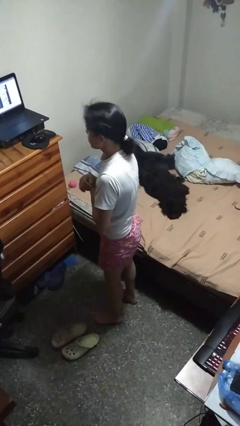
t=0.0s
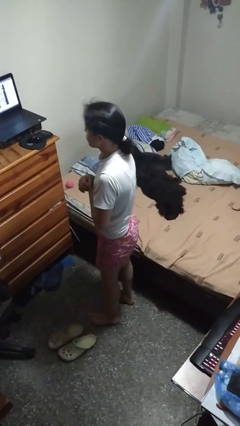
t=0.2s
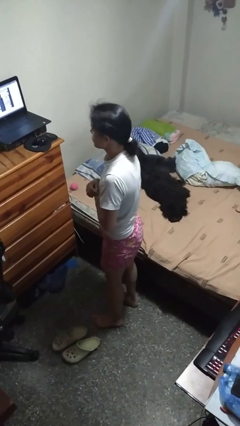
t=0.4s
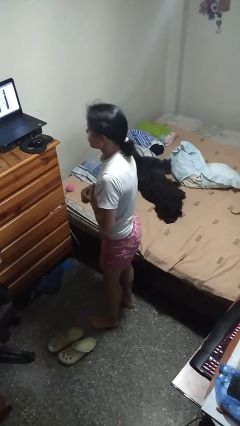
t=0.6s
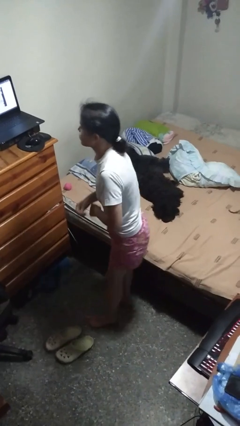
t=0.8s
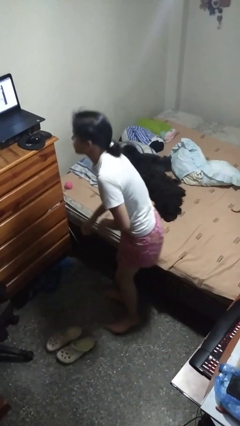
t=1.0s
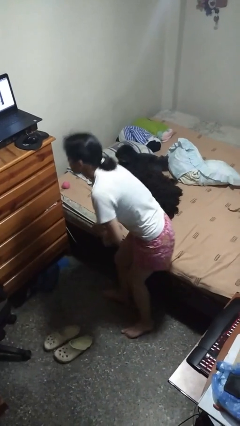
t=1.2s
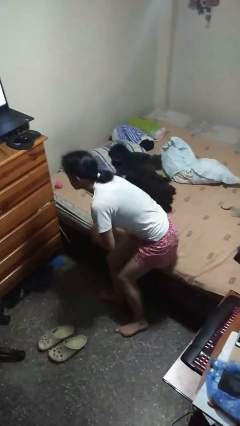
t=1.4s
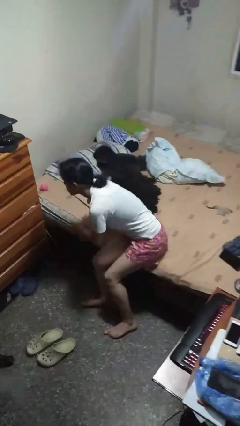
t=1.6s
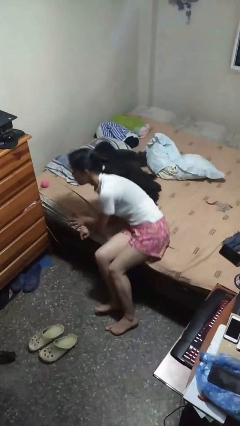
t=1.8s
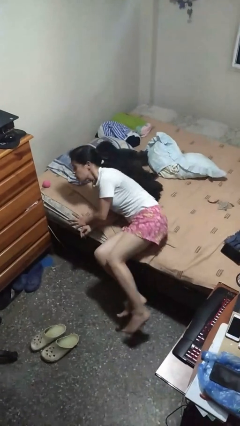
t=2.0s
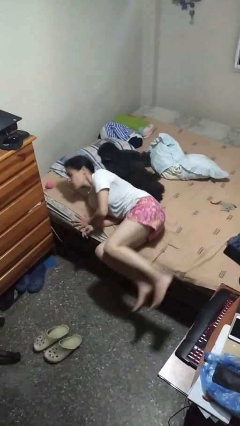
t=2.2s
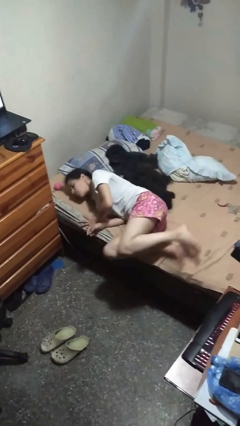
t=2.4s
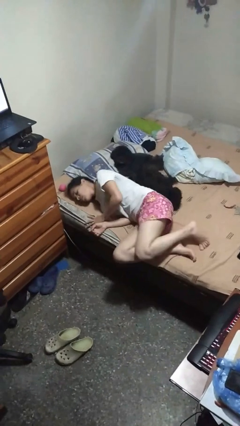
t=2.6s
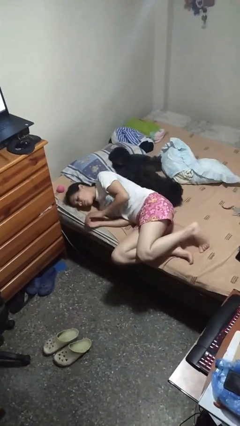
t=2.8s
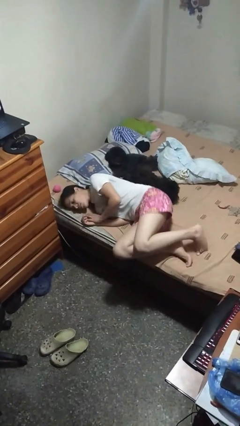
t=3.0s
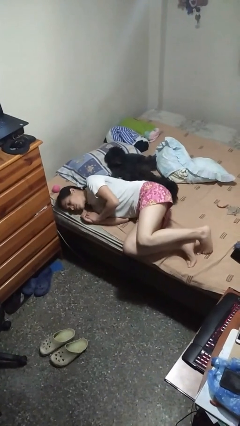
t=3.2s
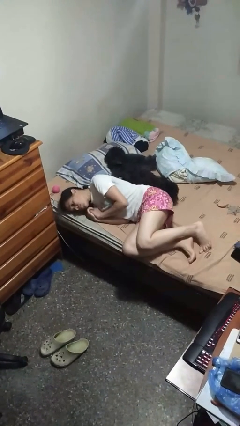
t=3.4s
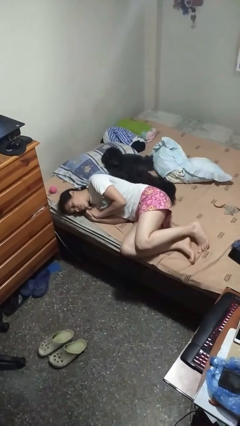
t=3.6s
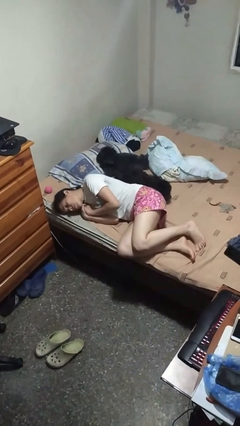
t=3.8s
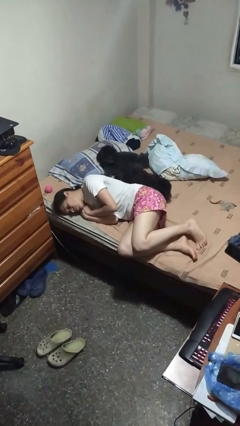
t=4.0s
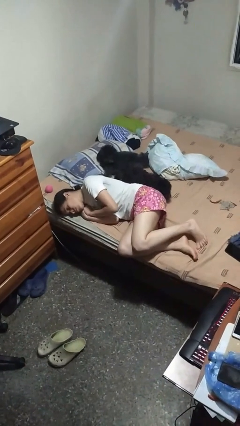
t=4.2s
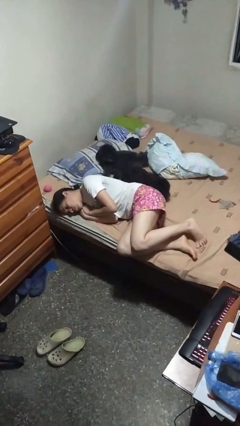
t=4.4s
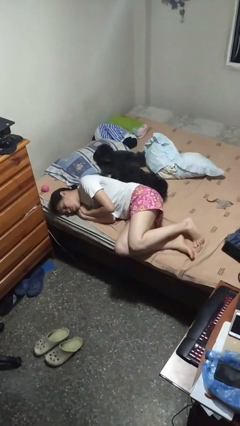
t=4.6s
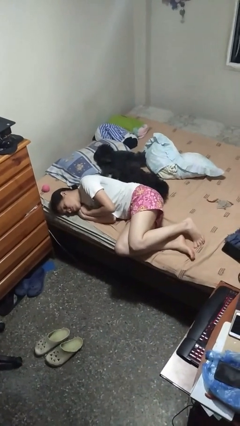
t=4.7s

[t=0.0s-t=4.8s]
person lies down on bed

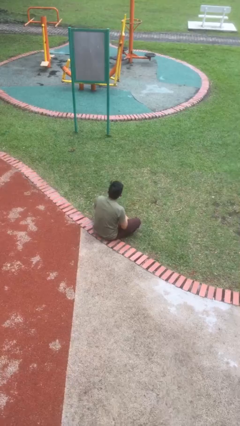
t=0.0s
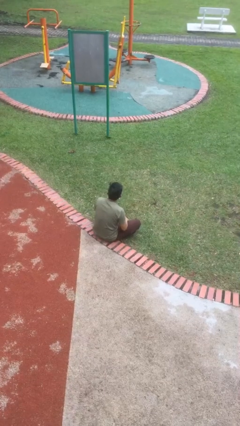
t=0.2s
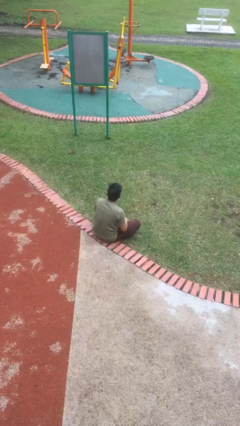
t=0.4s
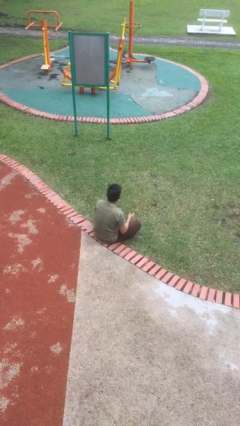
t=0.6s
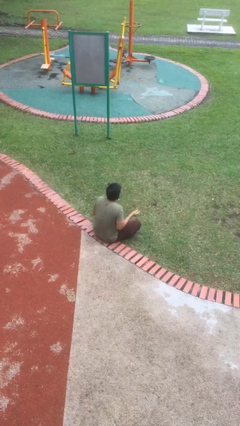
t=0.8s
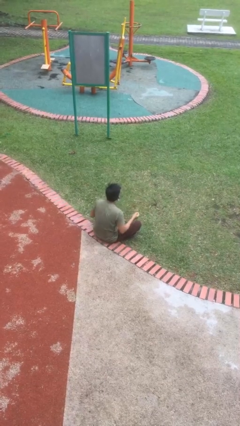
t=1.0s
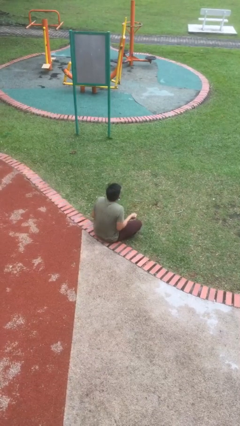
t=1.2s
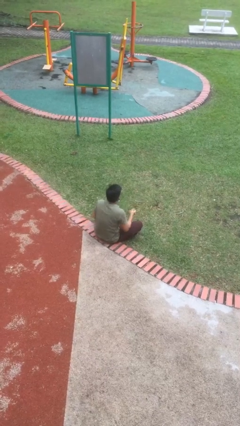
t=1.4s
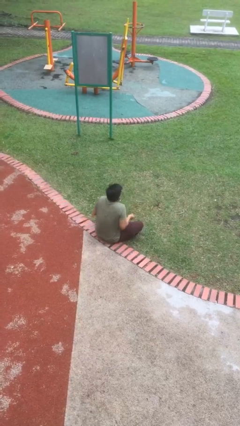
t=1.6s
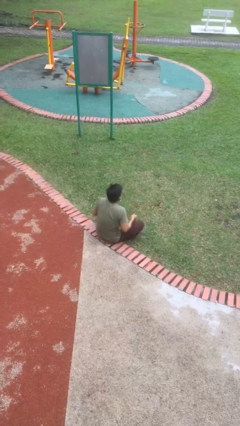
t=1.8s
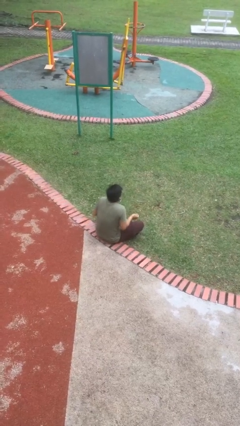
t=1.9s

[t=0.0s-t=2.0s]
person shrugs

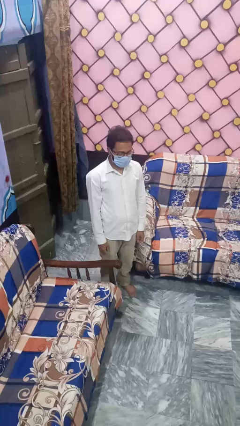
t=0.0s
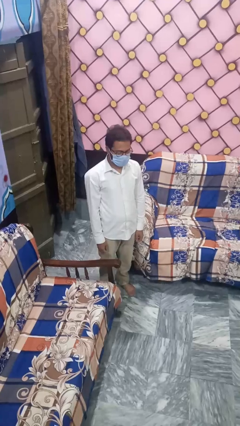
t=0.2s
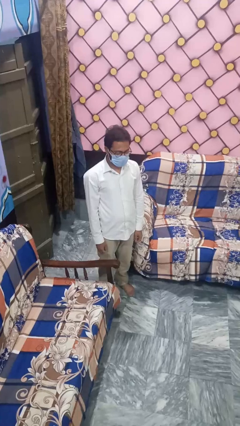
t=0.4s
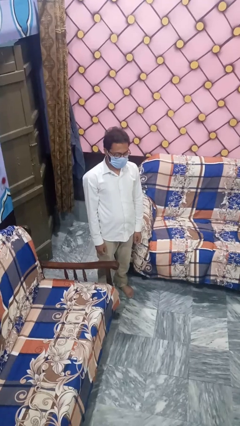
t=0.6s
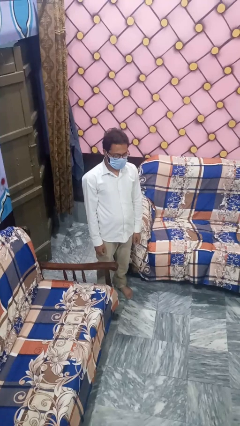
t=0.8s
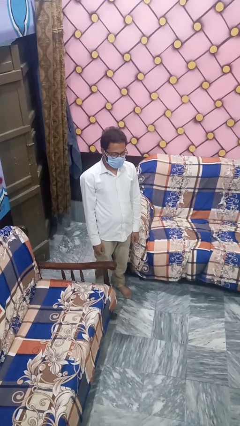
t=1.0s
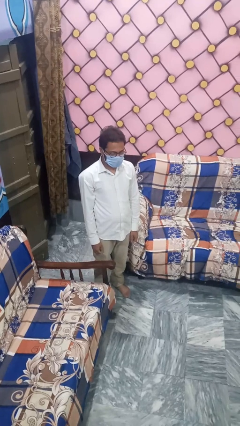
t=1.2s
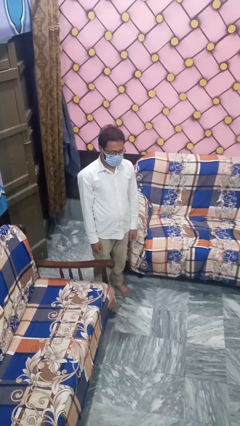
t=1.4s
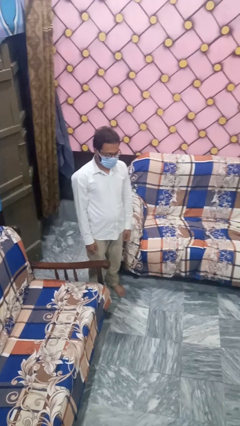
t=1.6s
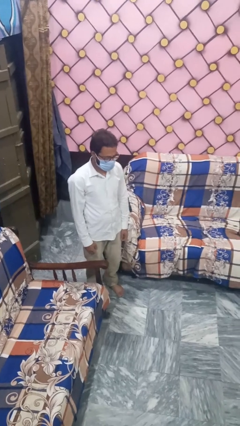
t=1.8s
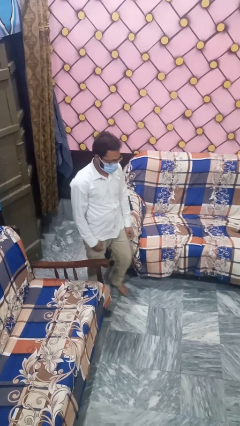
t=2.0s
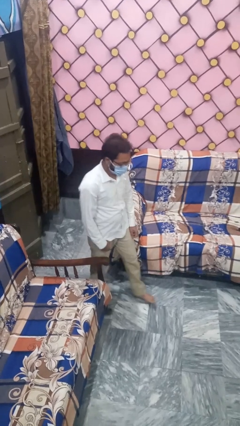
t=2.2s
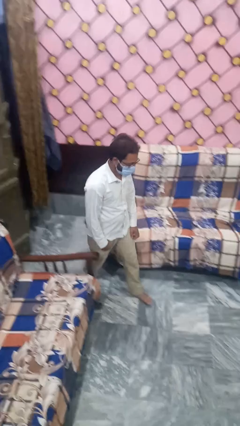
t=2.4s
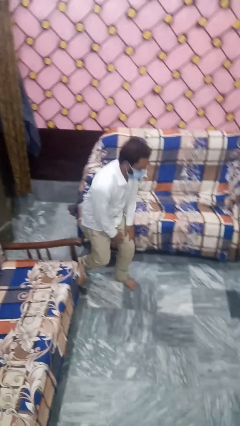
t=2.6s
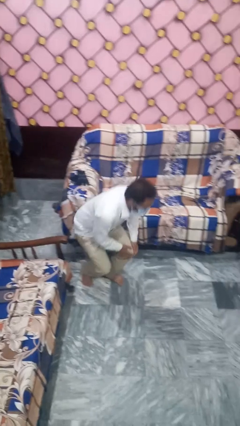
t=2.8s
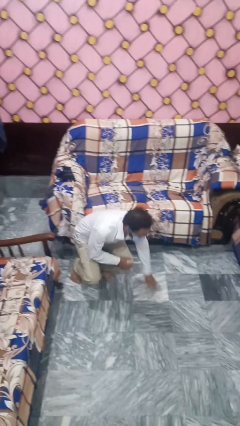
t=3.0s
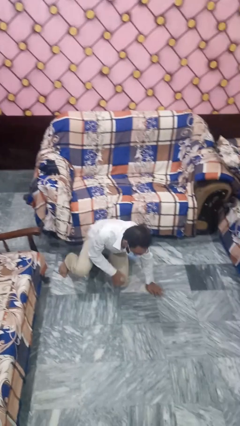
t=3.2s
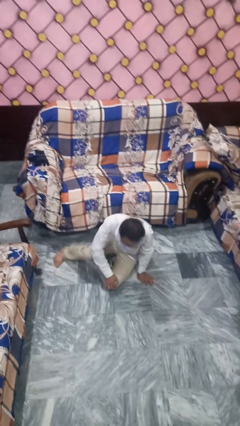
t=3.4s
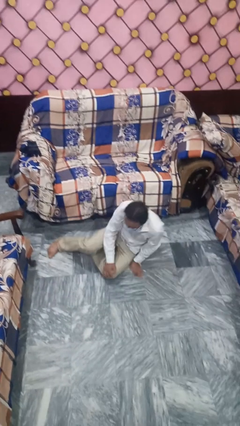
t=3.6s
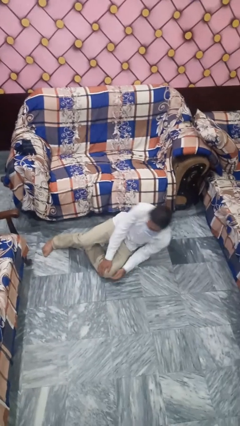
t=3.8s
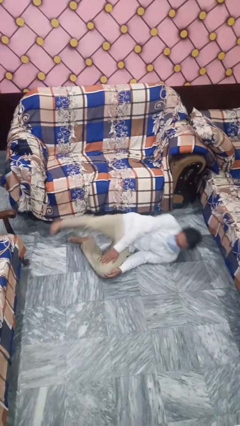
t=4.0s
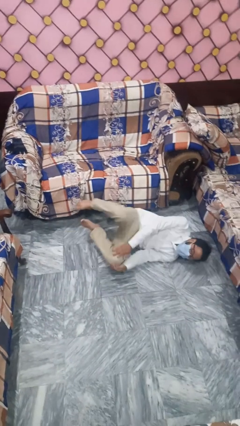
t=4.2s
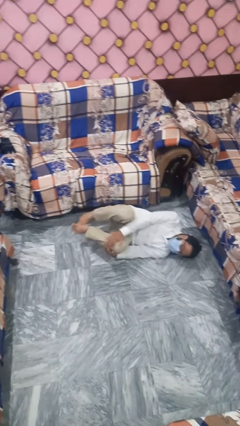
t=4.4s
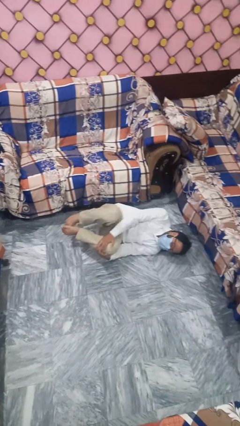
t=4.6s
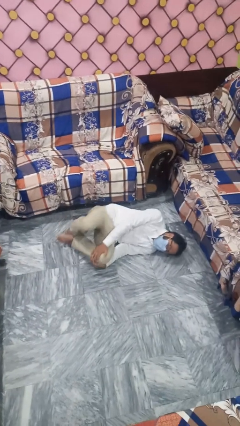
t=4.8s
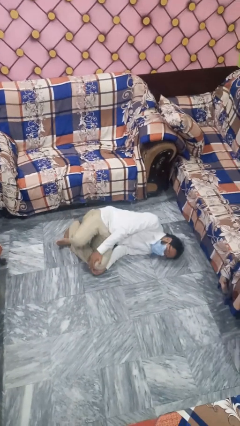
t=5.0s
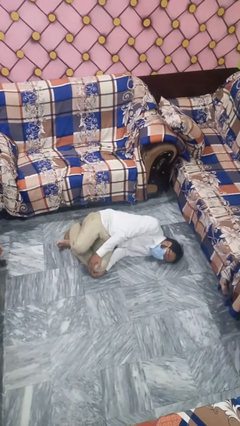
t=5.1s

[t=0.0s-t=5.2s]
person trips on object on floor

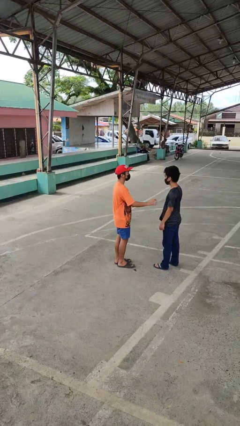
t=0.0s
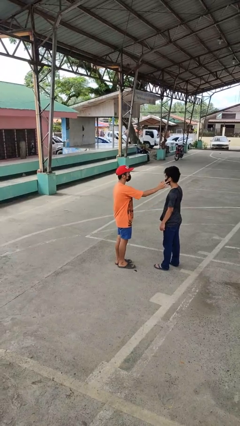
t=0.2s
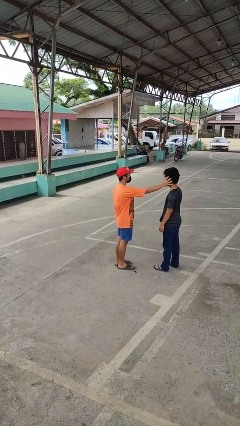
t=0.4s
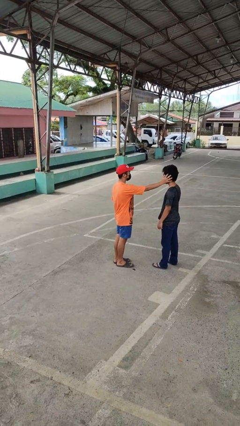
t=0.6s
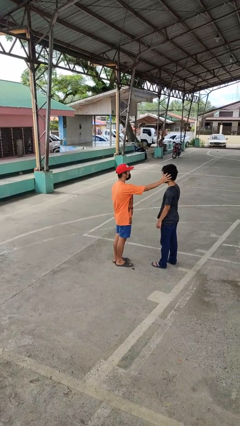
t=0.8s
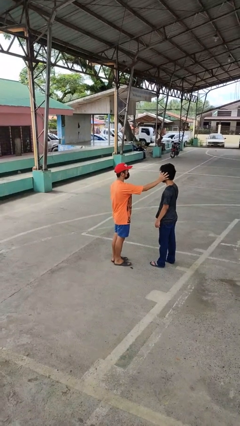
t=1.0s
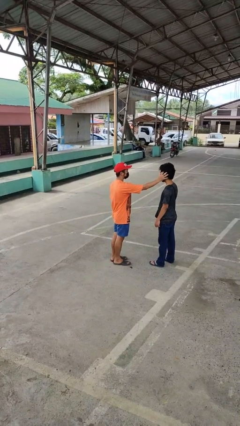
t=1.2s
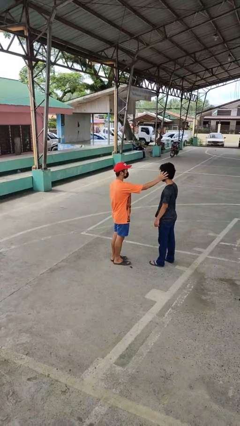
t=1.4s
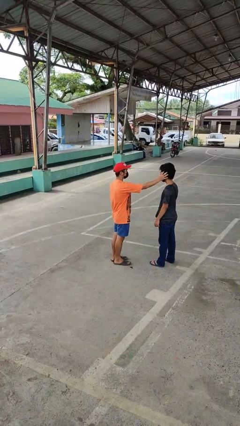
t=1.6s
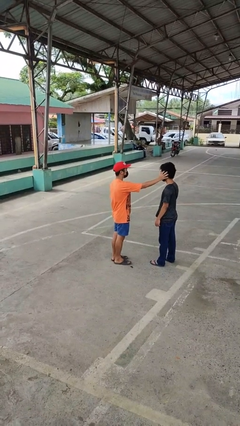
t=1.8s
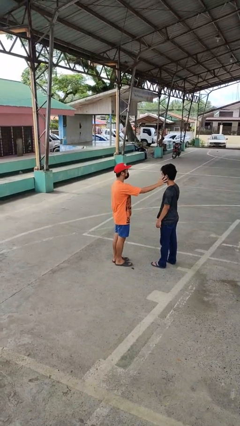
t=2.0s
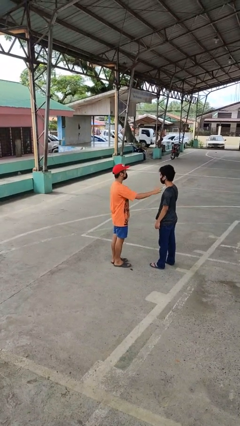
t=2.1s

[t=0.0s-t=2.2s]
person touches face of person

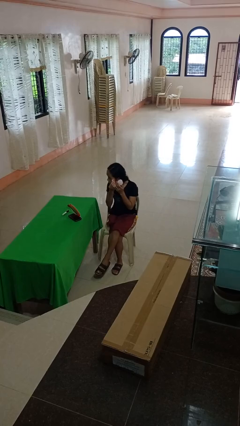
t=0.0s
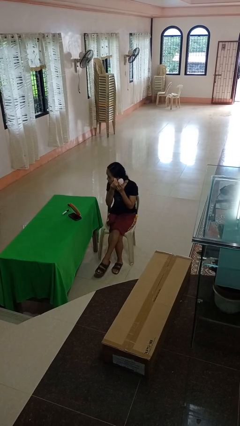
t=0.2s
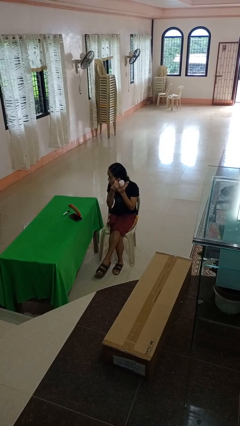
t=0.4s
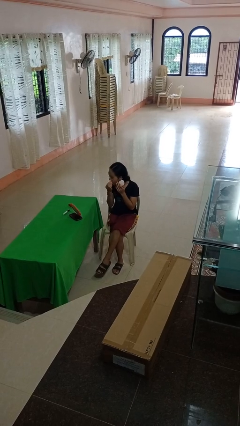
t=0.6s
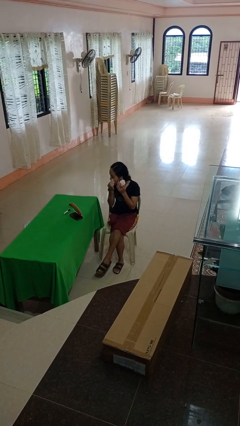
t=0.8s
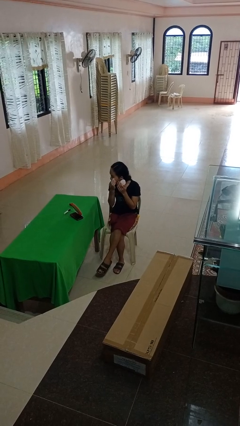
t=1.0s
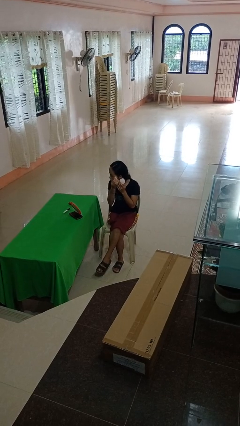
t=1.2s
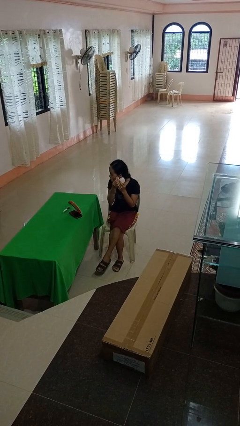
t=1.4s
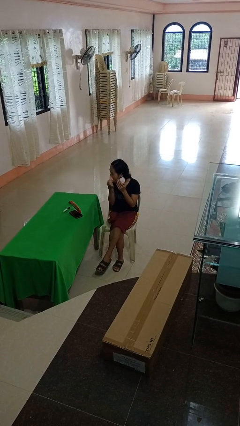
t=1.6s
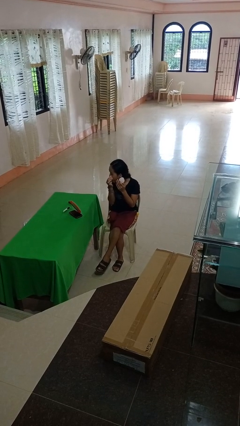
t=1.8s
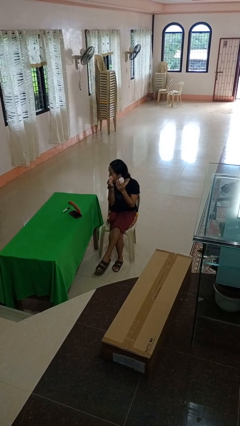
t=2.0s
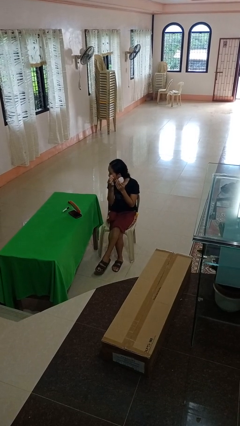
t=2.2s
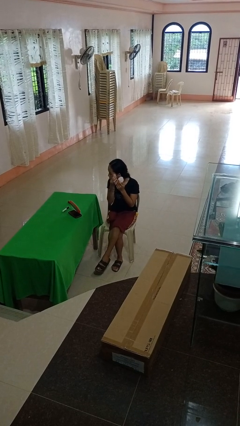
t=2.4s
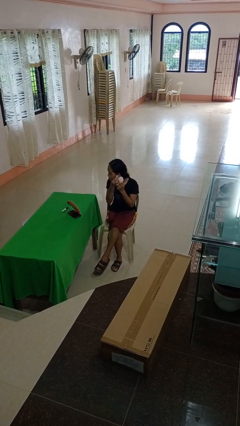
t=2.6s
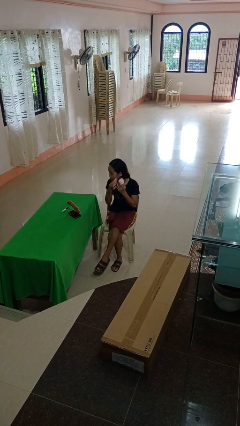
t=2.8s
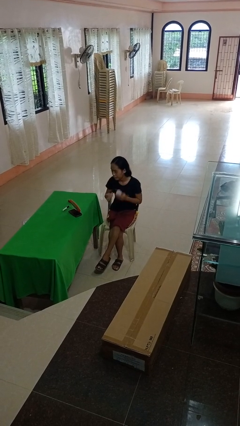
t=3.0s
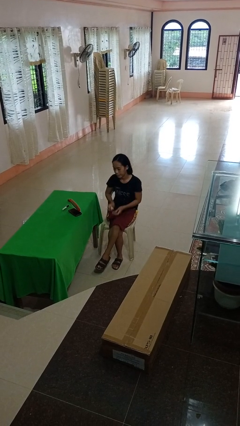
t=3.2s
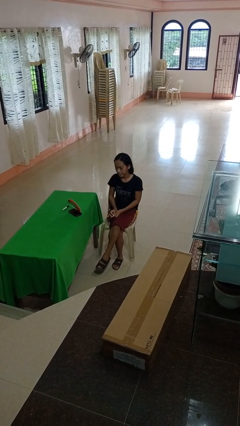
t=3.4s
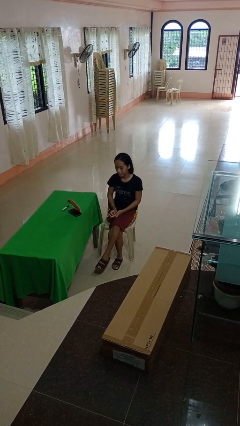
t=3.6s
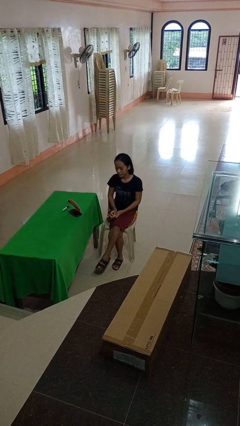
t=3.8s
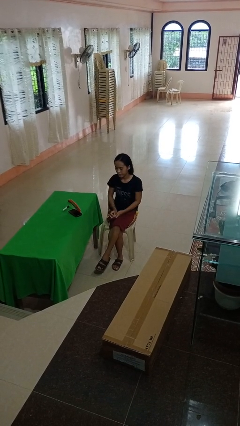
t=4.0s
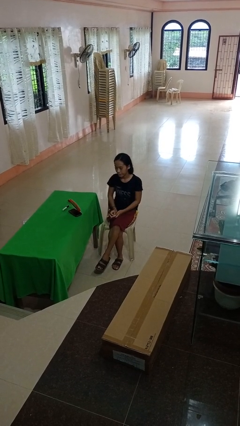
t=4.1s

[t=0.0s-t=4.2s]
person applies foundation makeup
